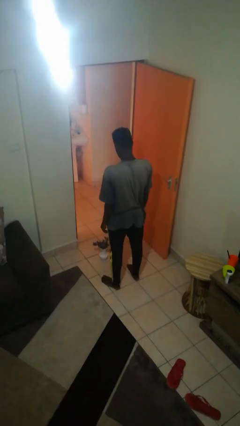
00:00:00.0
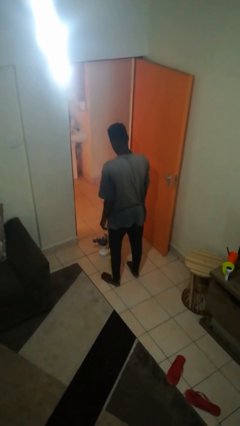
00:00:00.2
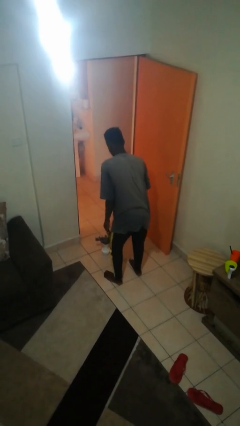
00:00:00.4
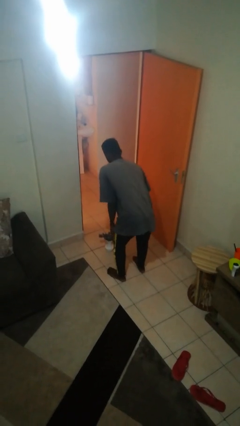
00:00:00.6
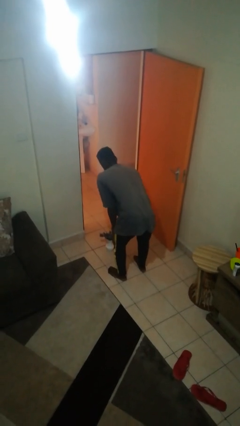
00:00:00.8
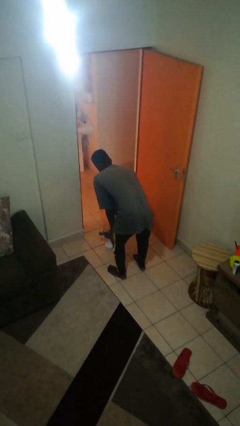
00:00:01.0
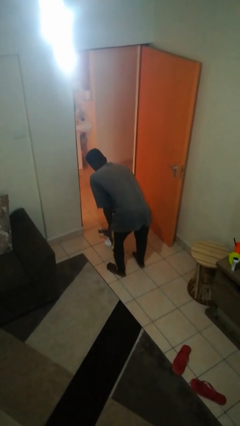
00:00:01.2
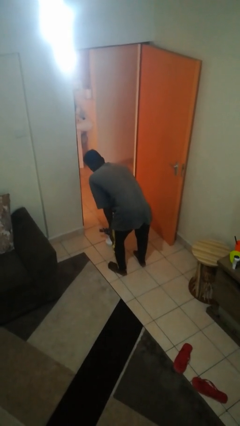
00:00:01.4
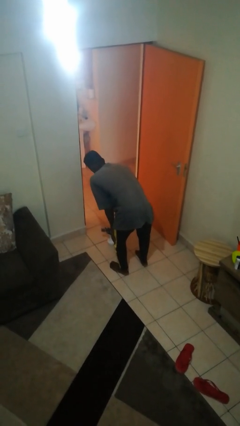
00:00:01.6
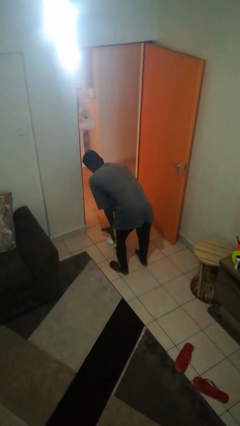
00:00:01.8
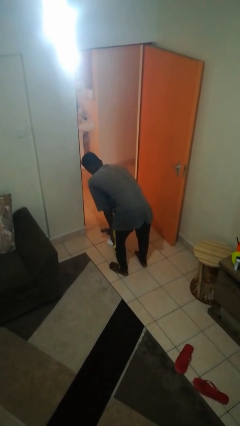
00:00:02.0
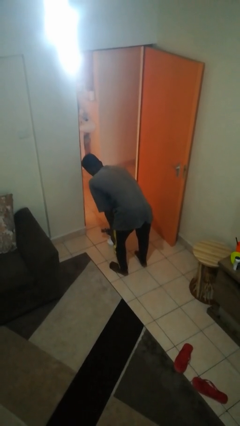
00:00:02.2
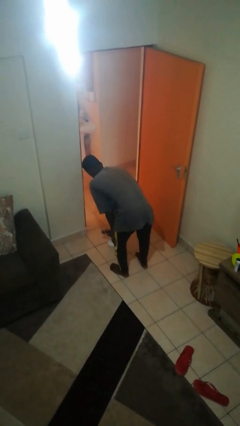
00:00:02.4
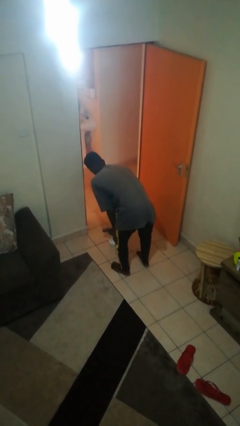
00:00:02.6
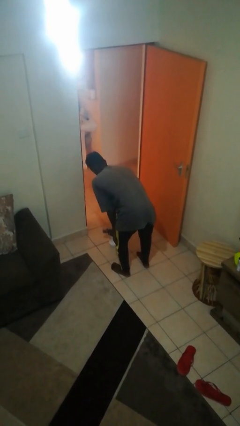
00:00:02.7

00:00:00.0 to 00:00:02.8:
person waters houseplant

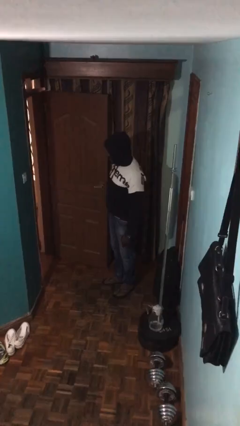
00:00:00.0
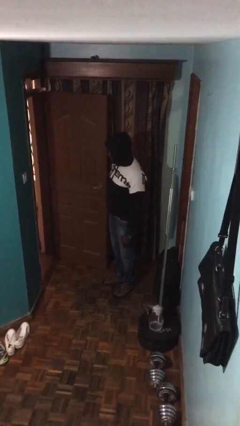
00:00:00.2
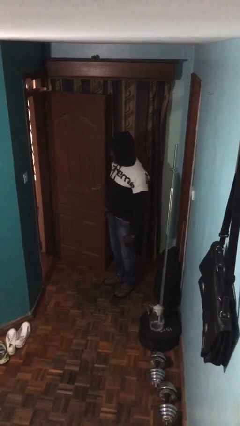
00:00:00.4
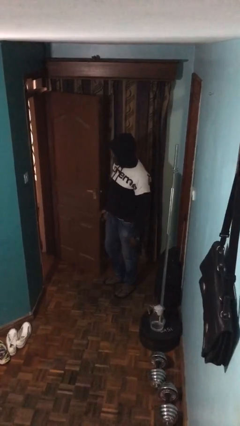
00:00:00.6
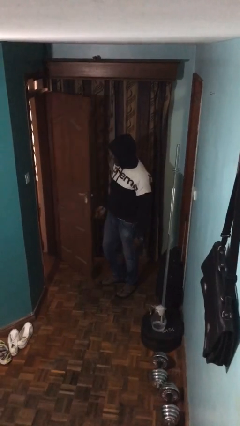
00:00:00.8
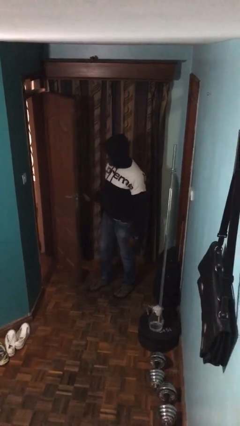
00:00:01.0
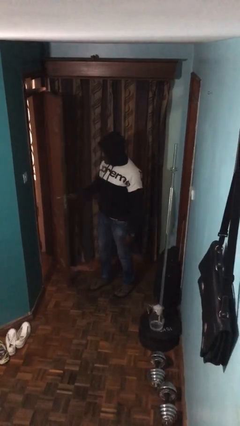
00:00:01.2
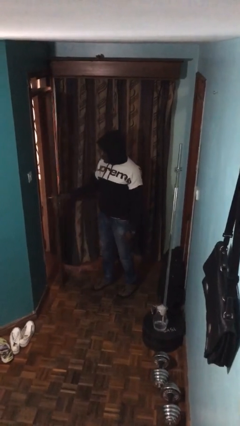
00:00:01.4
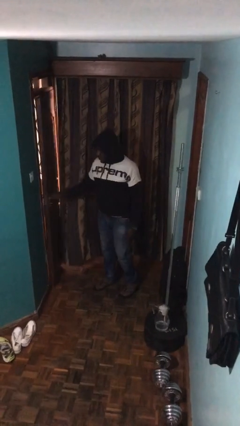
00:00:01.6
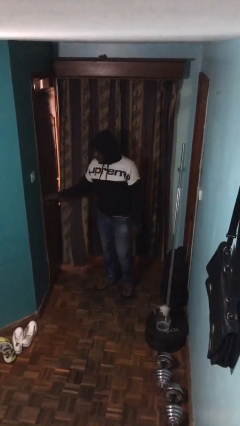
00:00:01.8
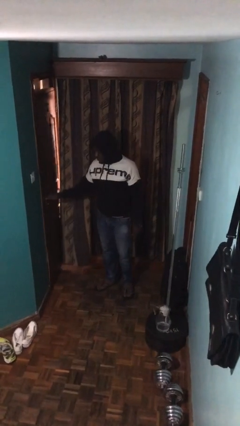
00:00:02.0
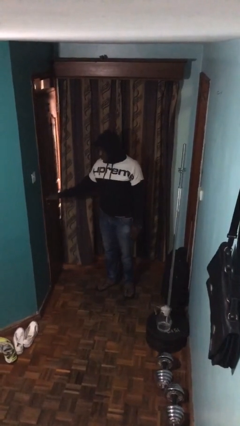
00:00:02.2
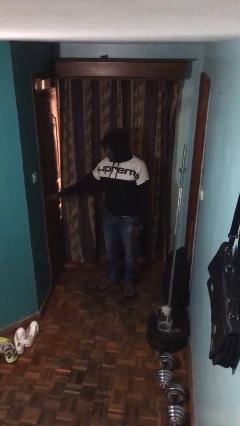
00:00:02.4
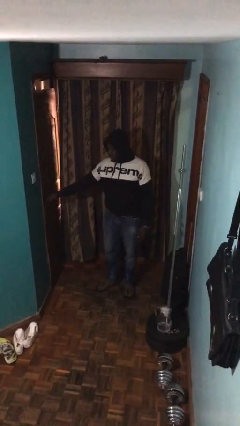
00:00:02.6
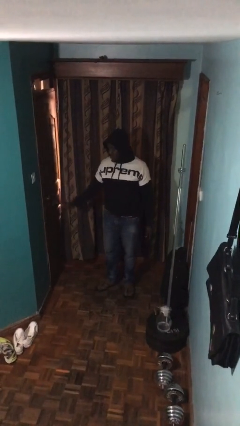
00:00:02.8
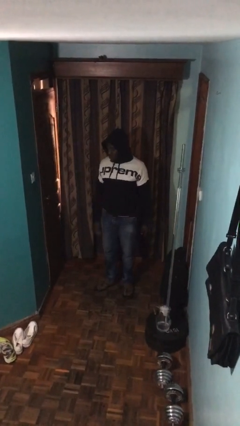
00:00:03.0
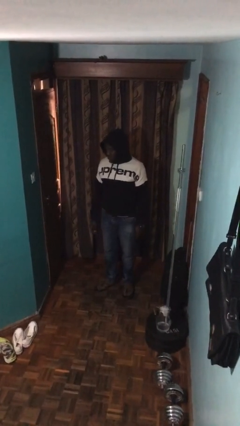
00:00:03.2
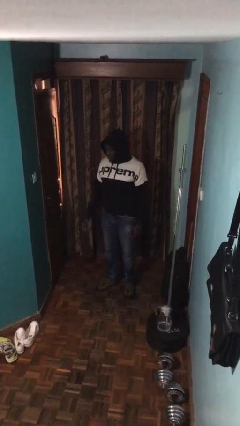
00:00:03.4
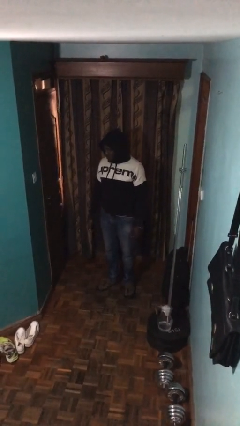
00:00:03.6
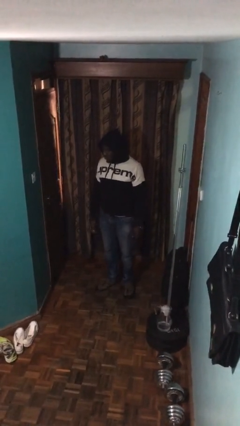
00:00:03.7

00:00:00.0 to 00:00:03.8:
person closes facility door

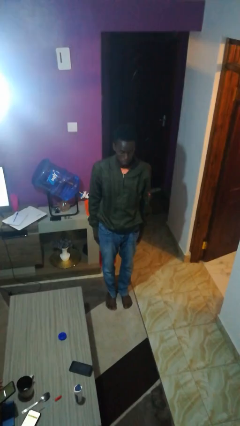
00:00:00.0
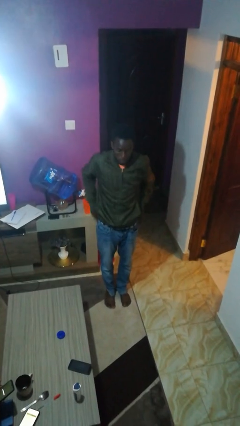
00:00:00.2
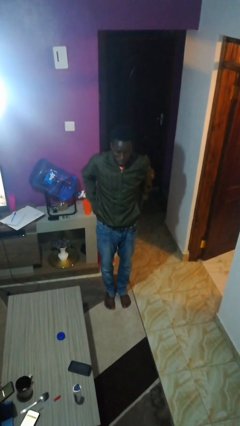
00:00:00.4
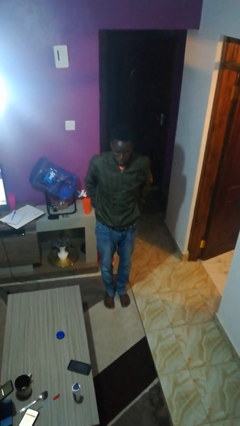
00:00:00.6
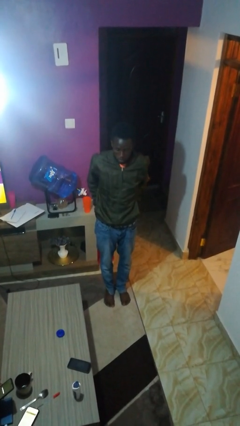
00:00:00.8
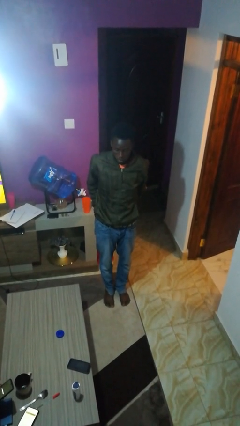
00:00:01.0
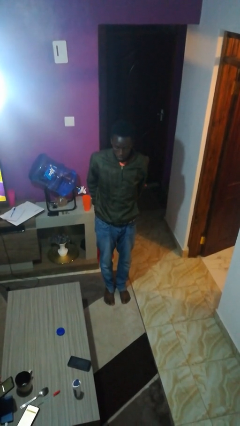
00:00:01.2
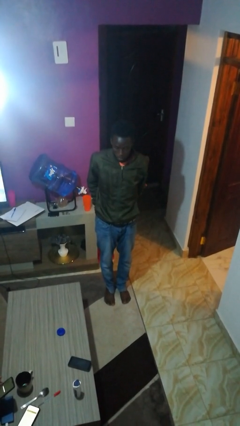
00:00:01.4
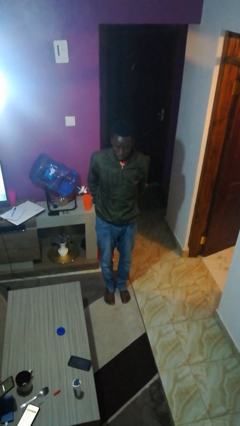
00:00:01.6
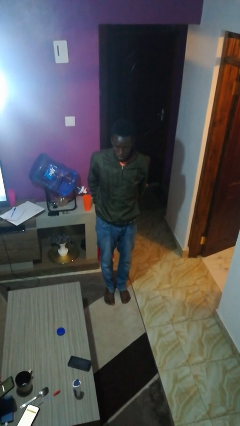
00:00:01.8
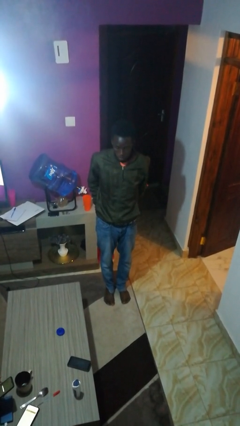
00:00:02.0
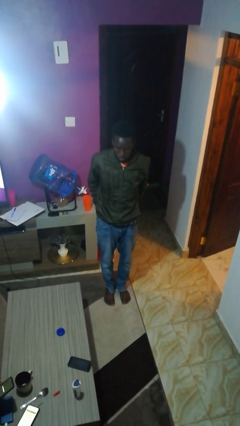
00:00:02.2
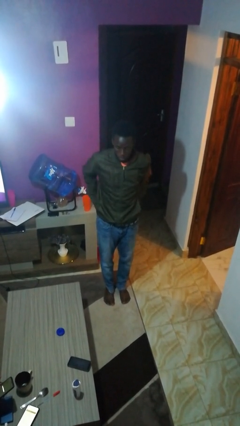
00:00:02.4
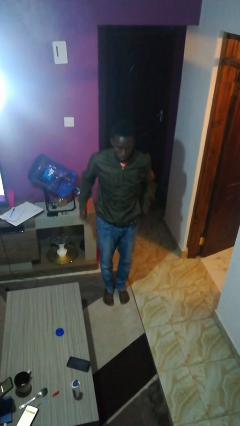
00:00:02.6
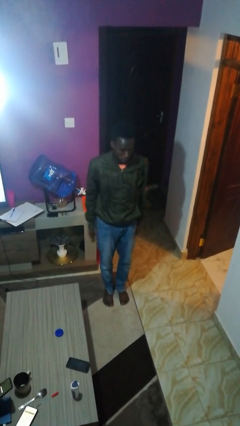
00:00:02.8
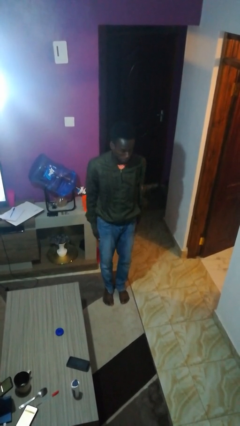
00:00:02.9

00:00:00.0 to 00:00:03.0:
person puts hands in back pockets

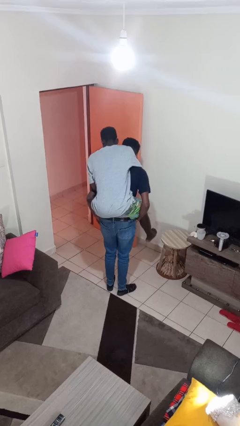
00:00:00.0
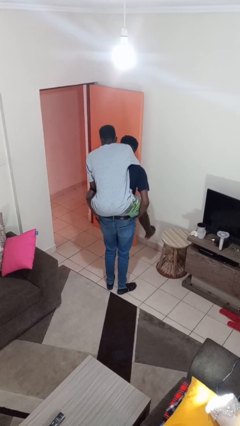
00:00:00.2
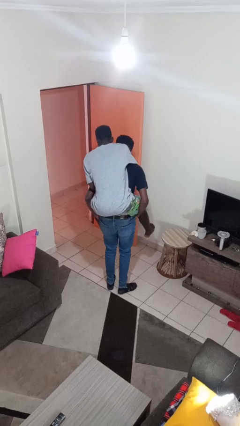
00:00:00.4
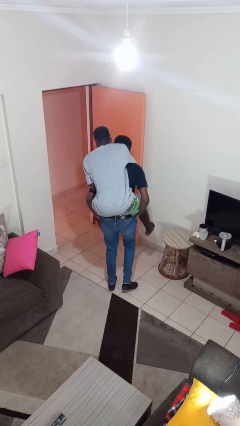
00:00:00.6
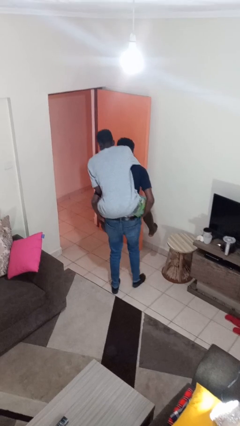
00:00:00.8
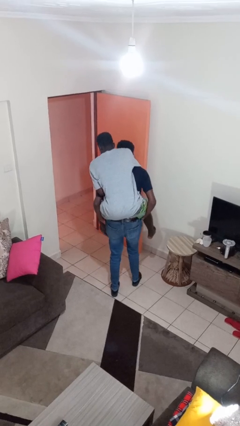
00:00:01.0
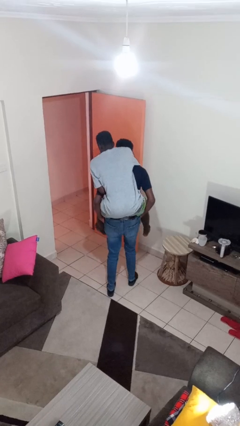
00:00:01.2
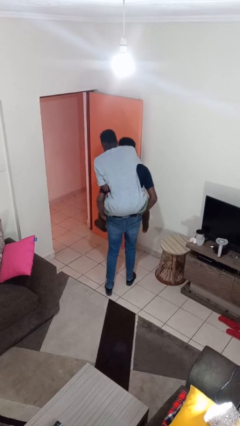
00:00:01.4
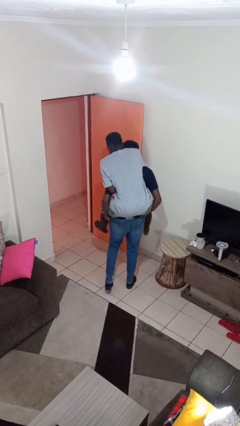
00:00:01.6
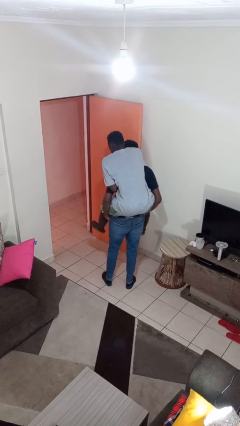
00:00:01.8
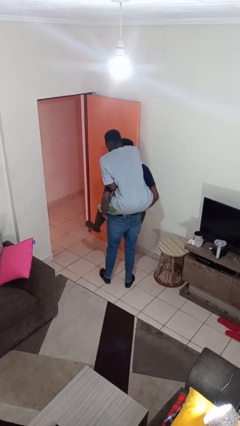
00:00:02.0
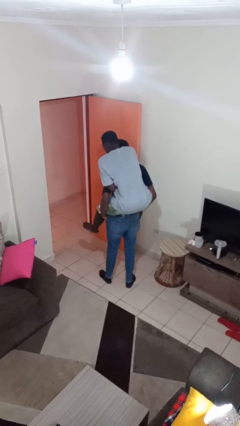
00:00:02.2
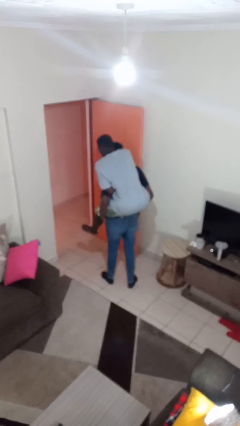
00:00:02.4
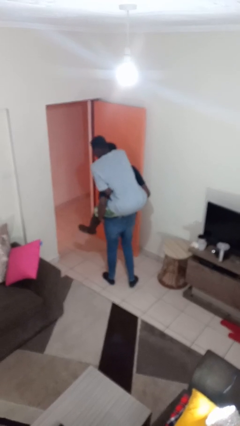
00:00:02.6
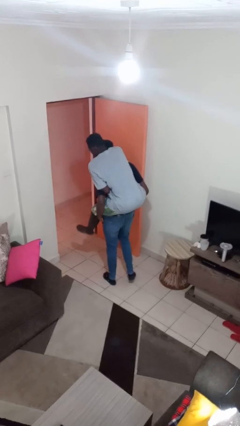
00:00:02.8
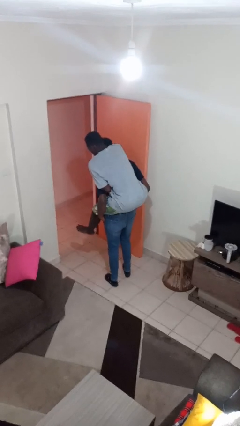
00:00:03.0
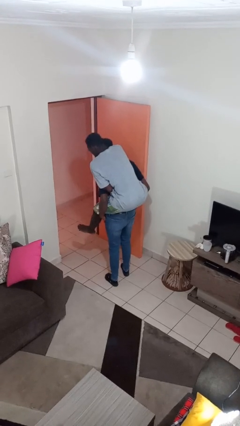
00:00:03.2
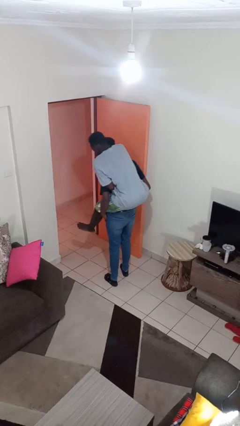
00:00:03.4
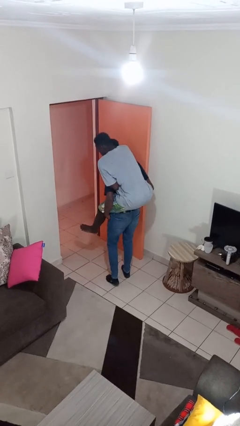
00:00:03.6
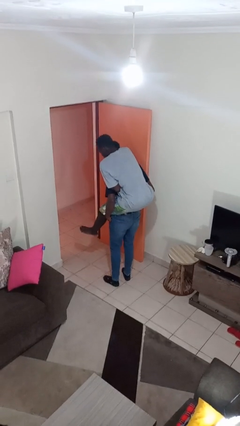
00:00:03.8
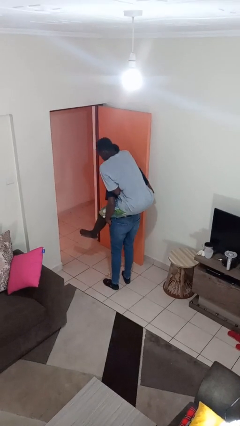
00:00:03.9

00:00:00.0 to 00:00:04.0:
person carries person on back

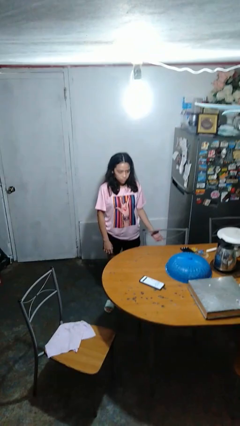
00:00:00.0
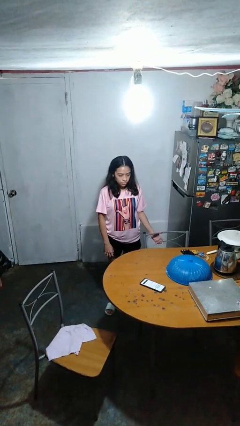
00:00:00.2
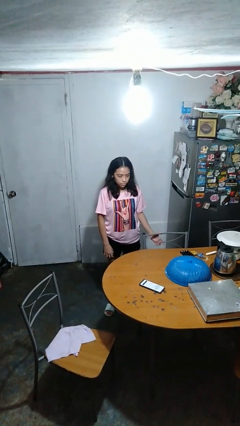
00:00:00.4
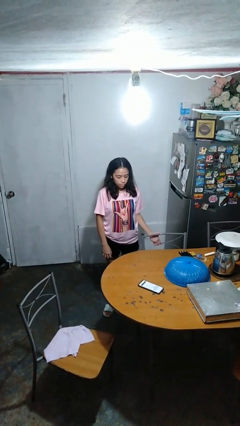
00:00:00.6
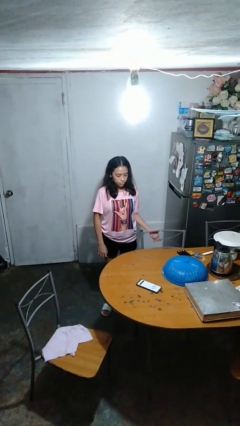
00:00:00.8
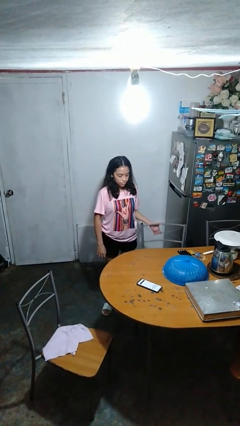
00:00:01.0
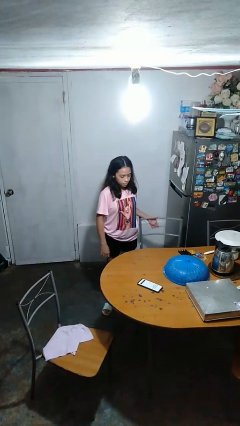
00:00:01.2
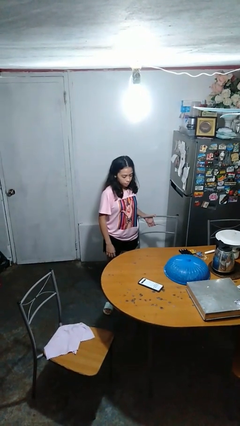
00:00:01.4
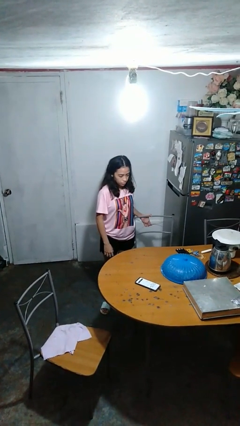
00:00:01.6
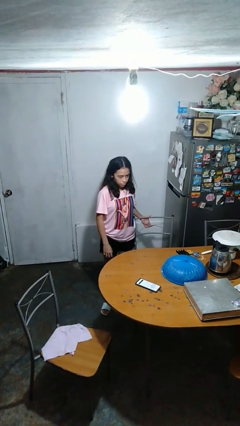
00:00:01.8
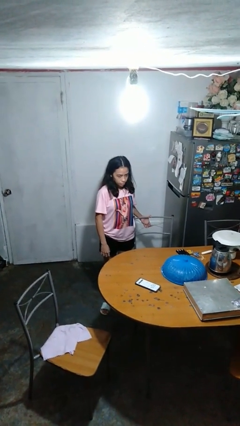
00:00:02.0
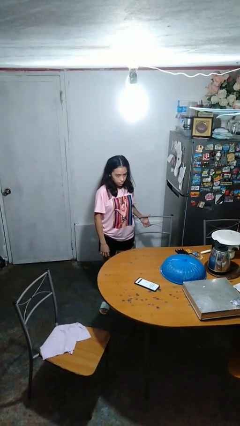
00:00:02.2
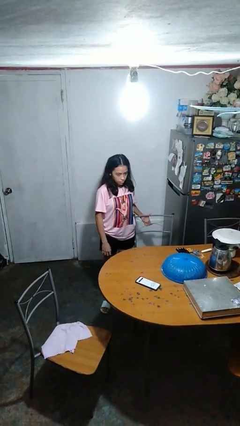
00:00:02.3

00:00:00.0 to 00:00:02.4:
person pulls out chair

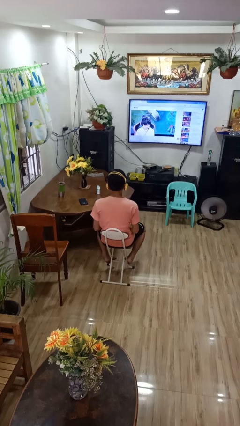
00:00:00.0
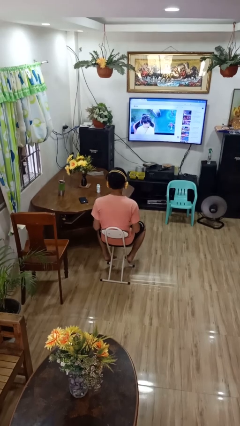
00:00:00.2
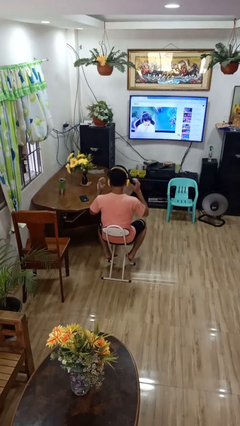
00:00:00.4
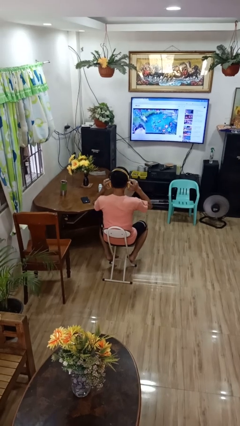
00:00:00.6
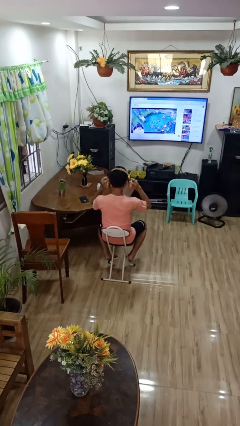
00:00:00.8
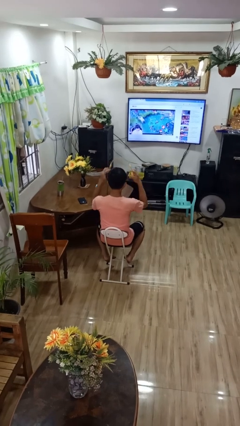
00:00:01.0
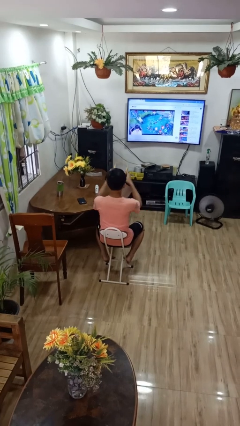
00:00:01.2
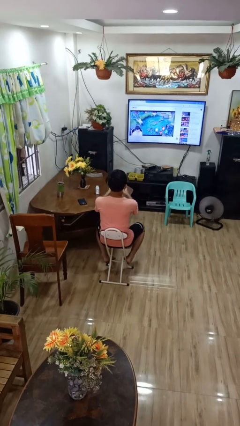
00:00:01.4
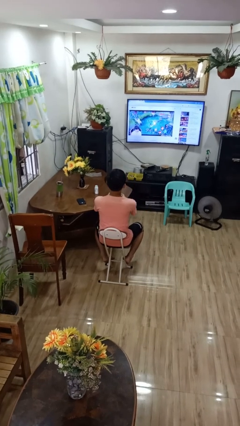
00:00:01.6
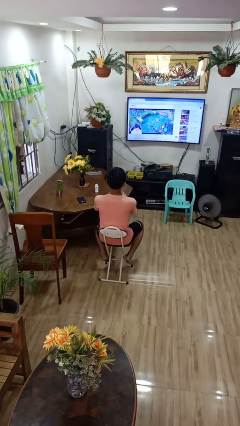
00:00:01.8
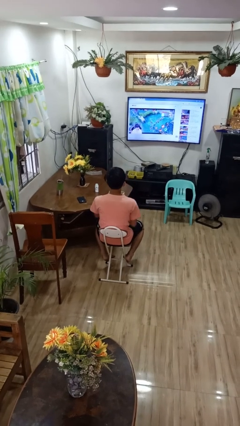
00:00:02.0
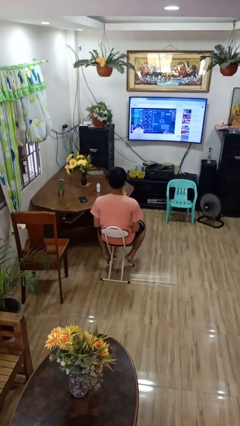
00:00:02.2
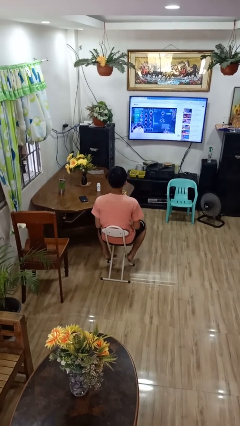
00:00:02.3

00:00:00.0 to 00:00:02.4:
person takes off headphones
